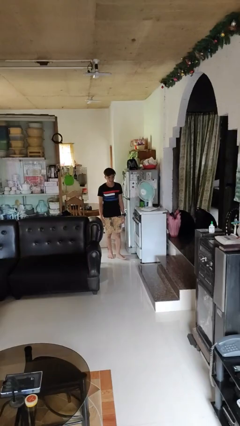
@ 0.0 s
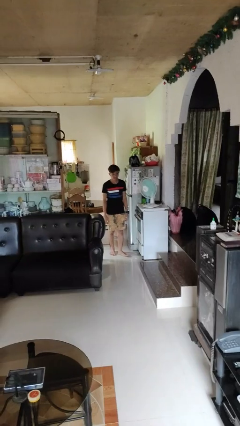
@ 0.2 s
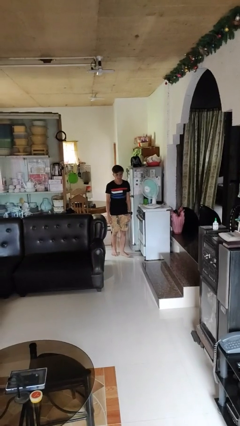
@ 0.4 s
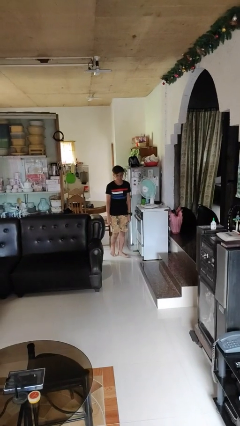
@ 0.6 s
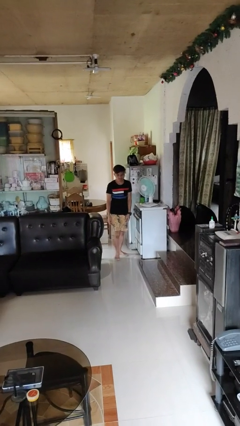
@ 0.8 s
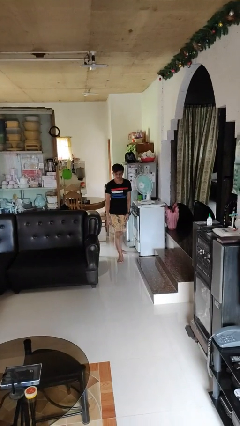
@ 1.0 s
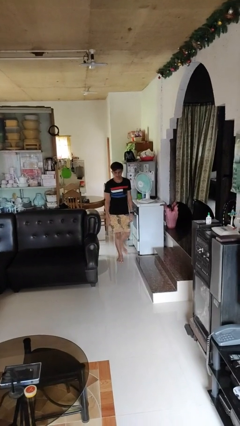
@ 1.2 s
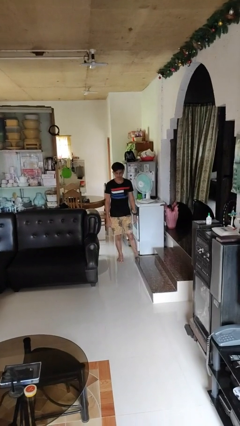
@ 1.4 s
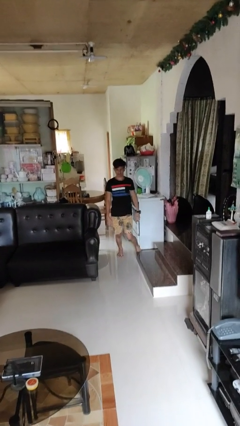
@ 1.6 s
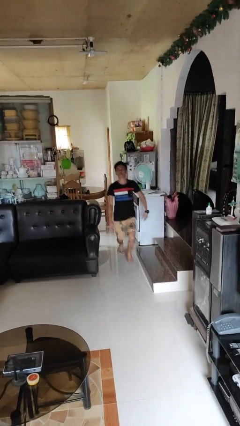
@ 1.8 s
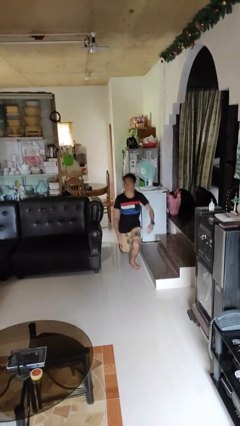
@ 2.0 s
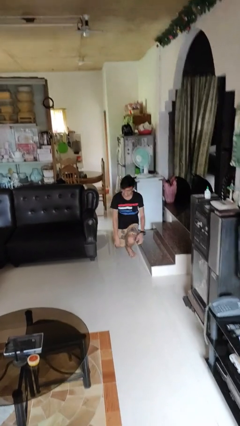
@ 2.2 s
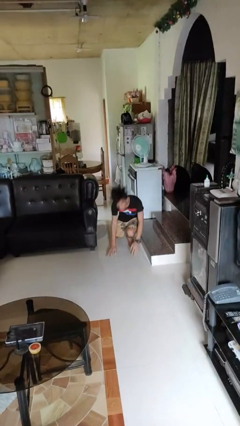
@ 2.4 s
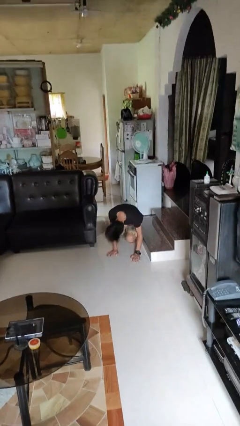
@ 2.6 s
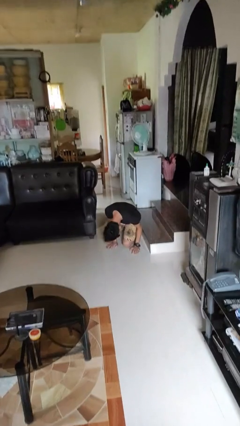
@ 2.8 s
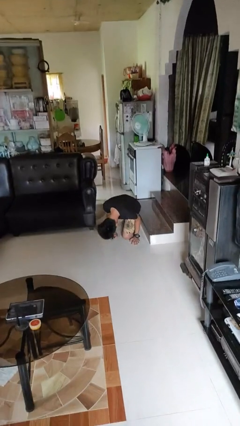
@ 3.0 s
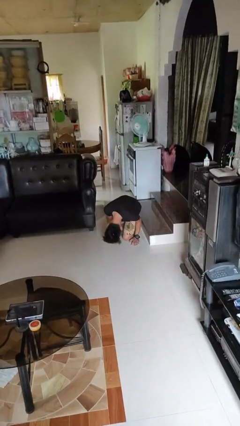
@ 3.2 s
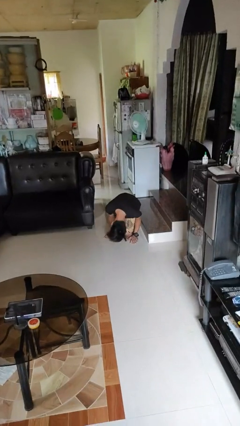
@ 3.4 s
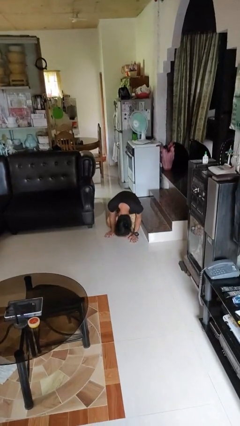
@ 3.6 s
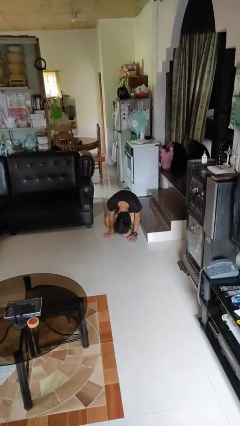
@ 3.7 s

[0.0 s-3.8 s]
person trips on object on floor

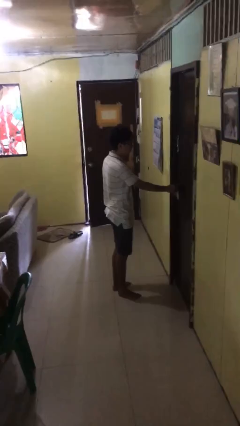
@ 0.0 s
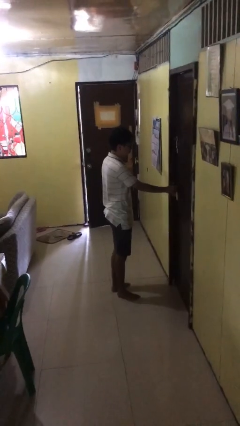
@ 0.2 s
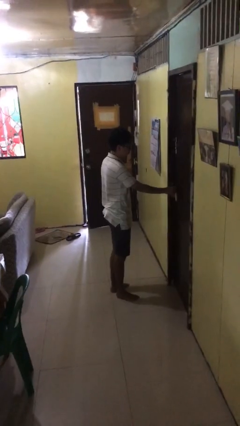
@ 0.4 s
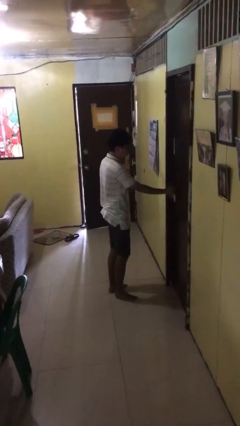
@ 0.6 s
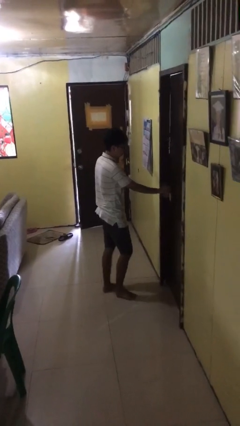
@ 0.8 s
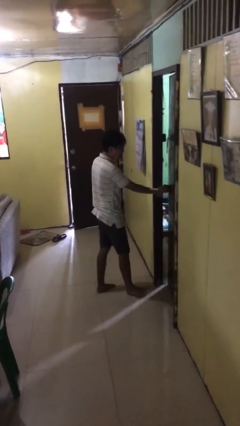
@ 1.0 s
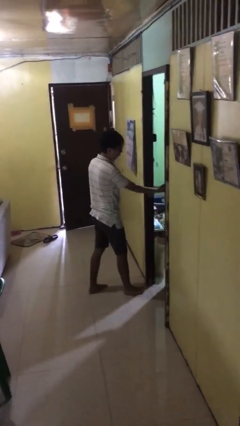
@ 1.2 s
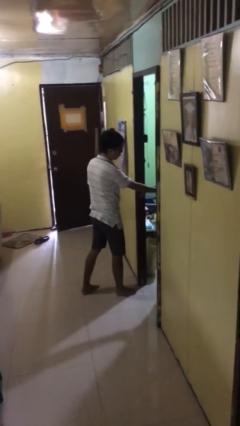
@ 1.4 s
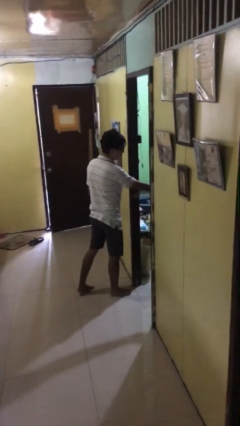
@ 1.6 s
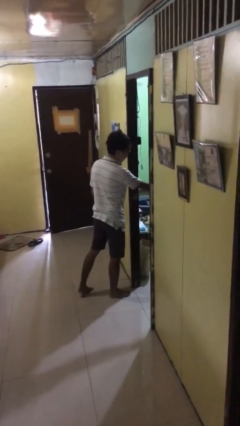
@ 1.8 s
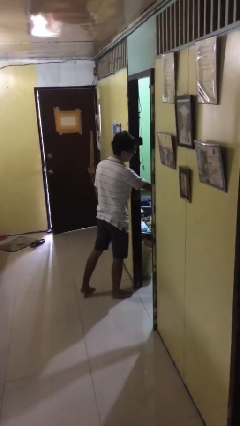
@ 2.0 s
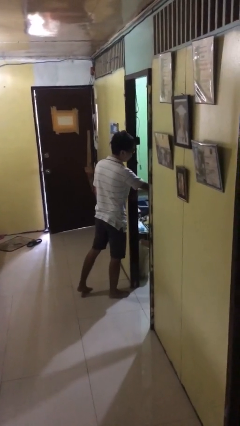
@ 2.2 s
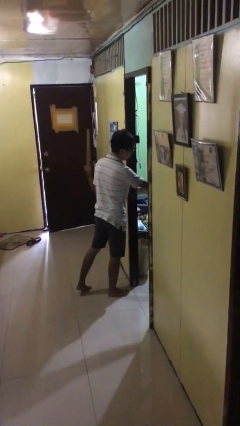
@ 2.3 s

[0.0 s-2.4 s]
person opens facility door

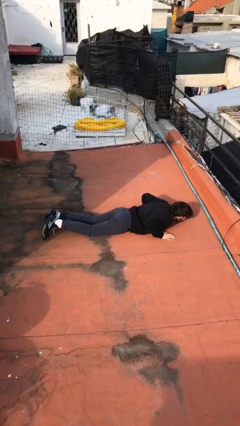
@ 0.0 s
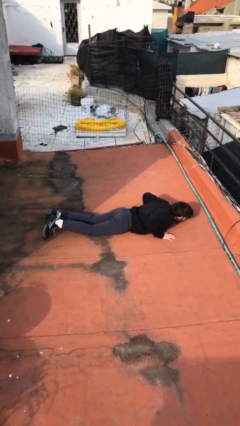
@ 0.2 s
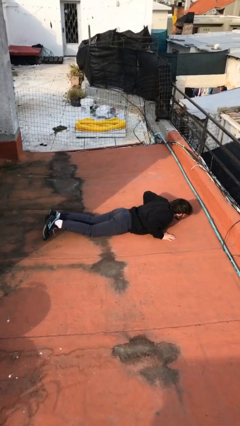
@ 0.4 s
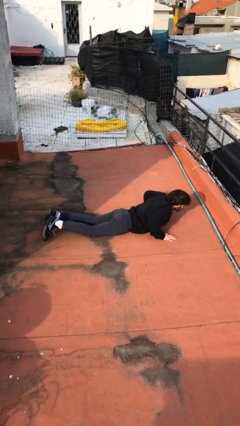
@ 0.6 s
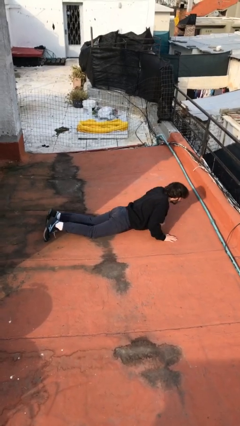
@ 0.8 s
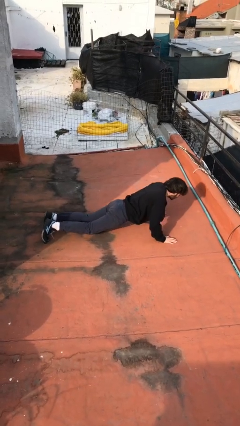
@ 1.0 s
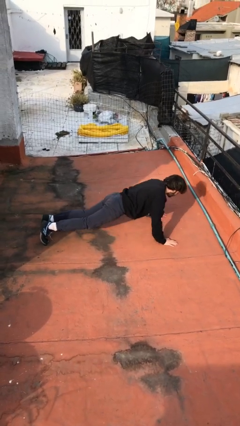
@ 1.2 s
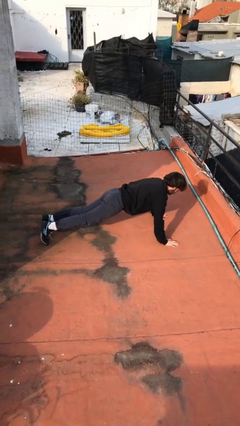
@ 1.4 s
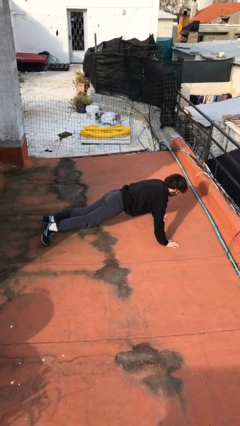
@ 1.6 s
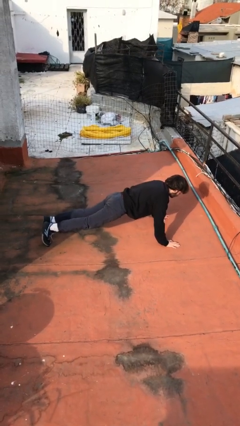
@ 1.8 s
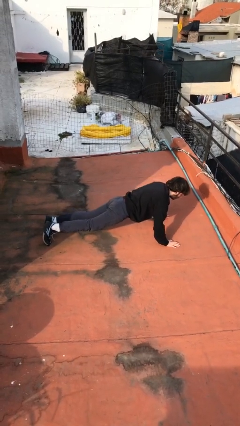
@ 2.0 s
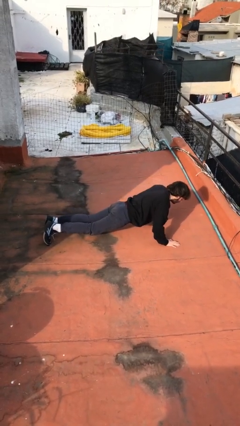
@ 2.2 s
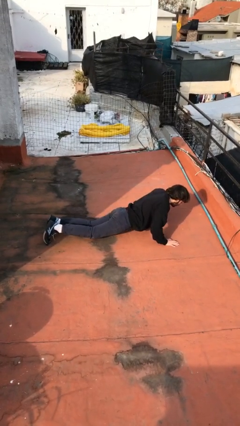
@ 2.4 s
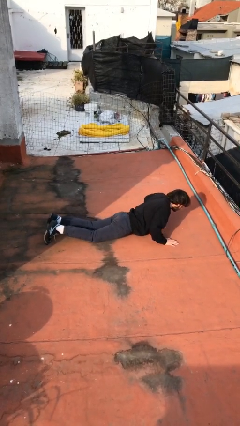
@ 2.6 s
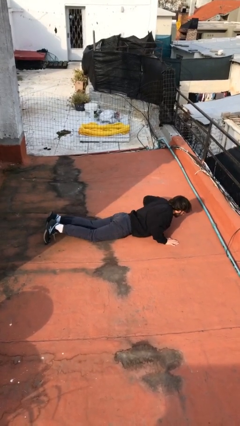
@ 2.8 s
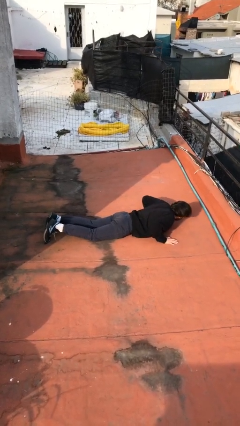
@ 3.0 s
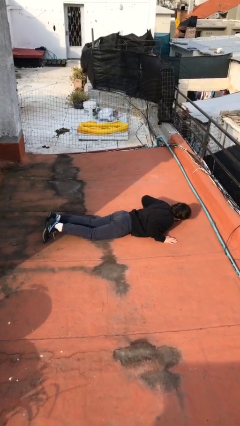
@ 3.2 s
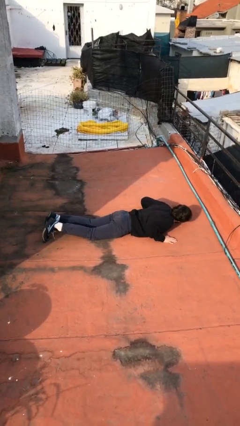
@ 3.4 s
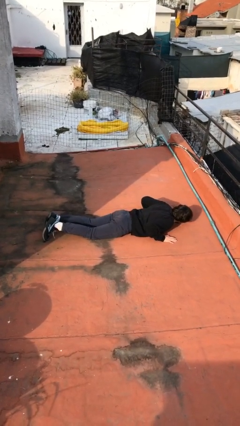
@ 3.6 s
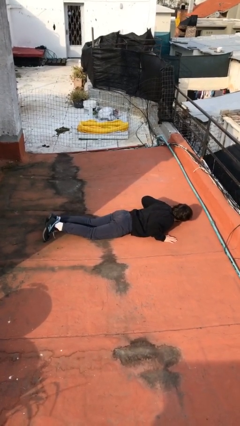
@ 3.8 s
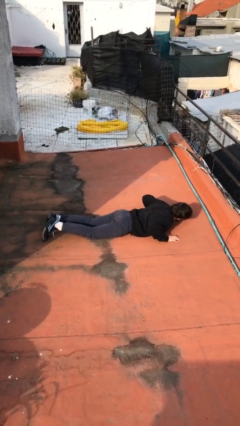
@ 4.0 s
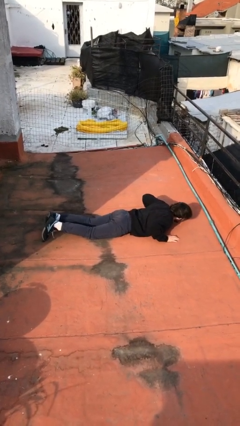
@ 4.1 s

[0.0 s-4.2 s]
person exercises with pushup

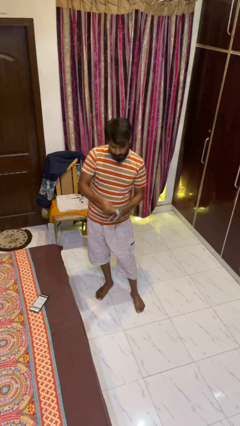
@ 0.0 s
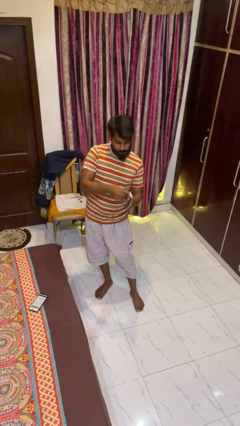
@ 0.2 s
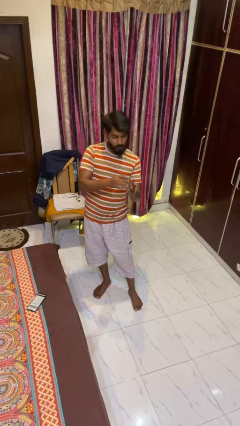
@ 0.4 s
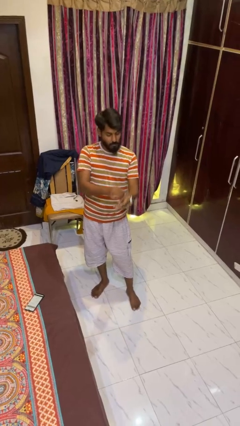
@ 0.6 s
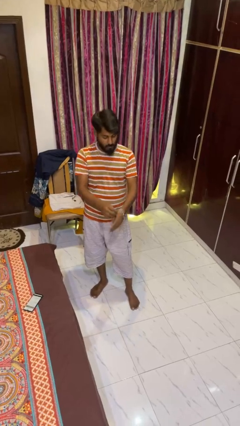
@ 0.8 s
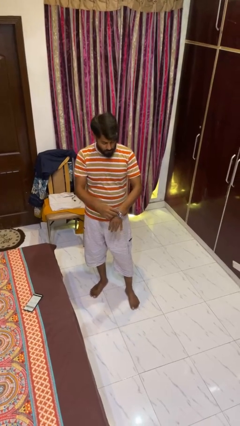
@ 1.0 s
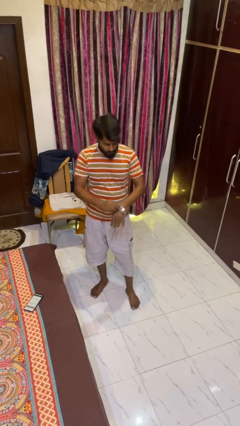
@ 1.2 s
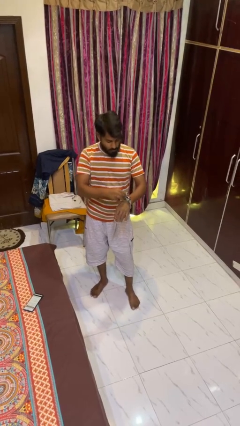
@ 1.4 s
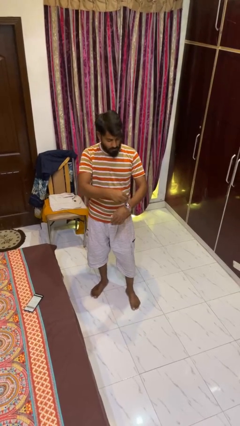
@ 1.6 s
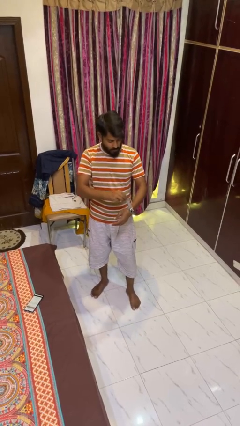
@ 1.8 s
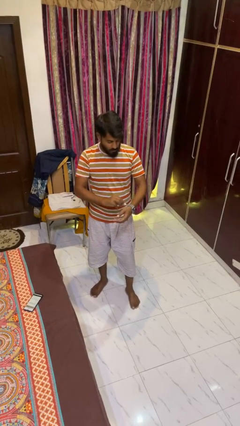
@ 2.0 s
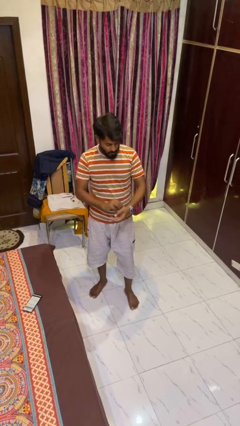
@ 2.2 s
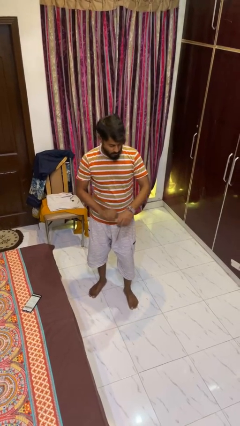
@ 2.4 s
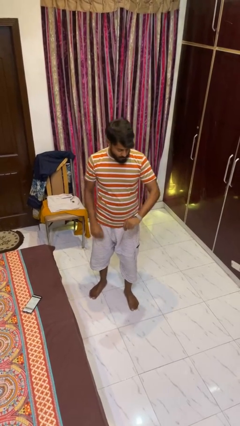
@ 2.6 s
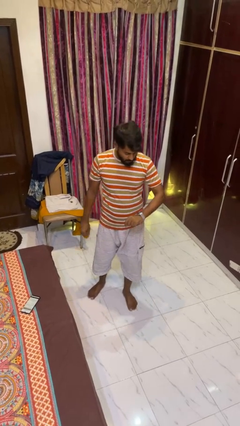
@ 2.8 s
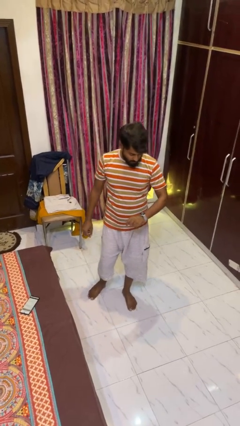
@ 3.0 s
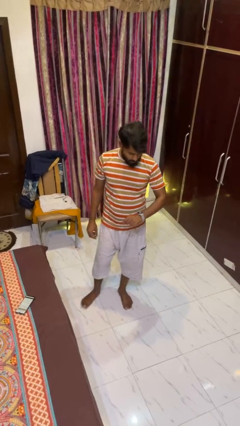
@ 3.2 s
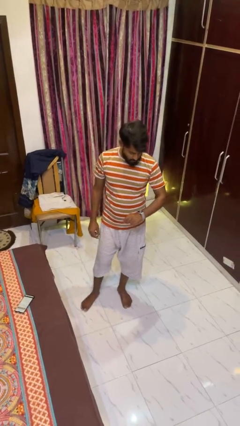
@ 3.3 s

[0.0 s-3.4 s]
person puts on wristwatch

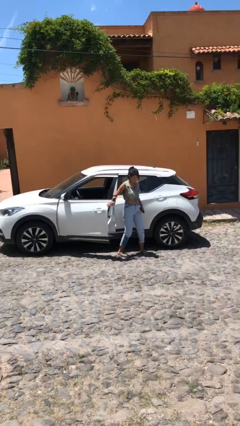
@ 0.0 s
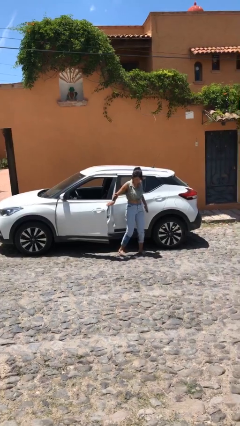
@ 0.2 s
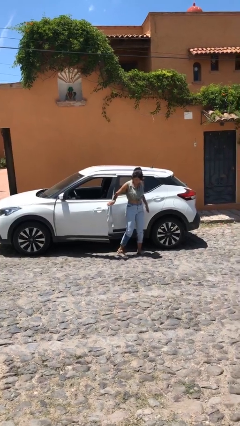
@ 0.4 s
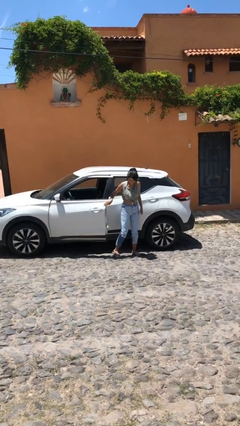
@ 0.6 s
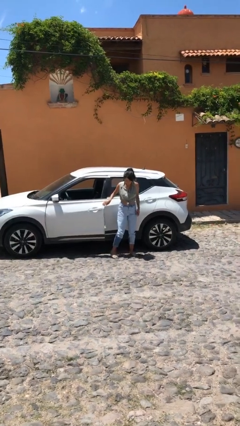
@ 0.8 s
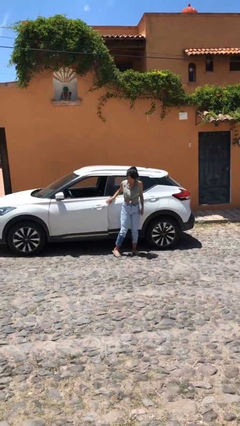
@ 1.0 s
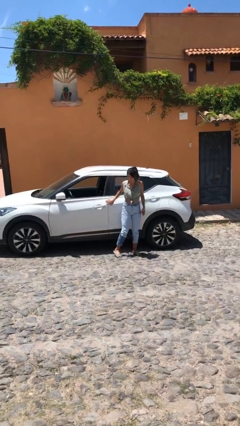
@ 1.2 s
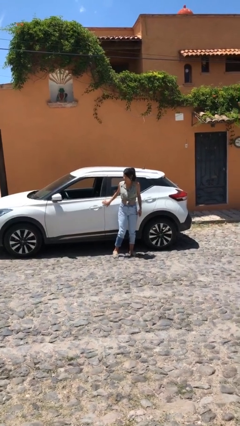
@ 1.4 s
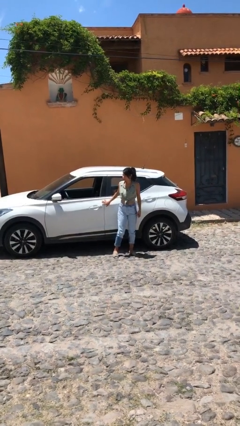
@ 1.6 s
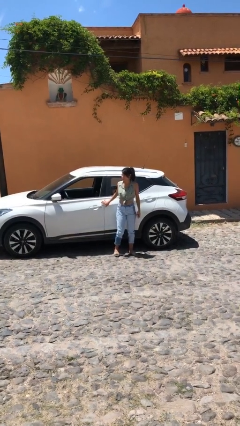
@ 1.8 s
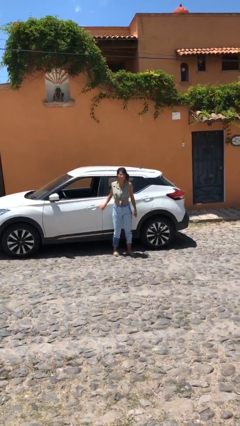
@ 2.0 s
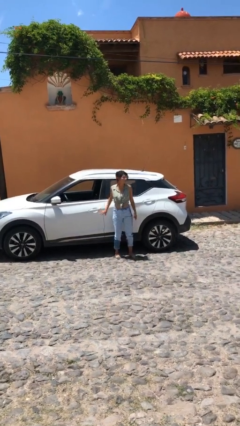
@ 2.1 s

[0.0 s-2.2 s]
person closes car door

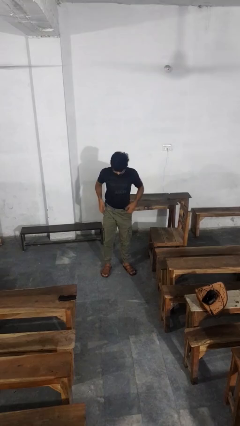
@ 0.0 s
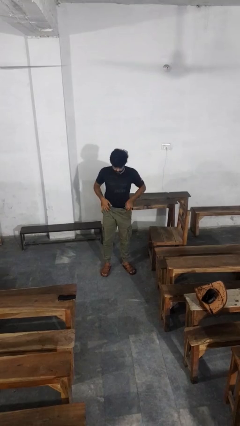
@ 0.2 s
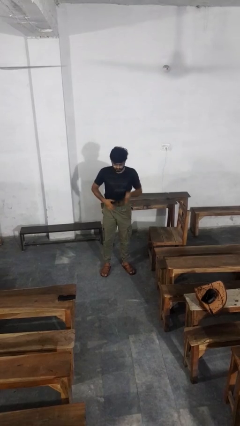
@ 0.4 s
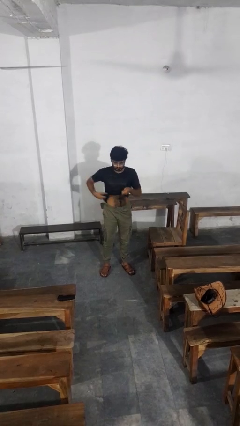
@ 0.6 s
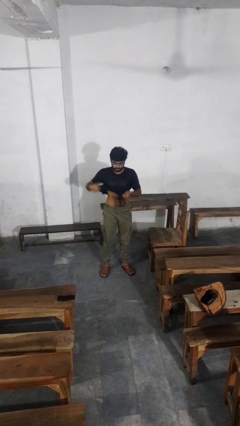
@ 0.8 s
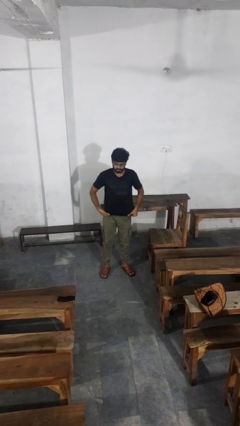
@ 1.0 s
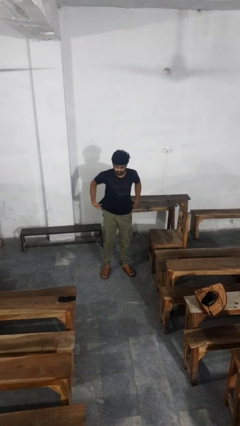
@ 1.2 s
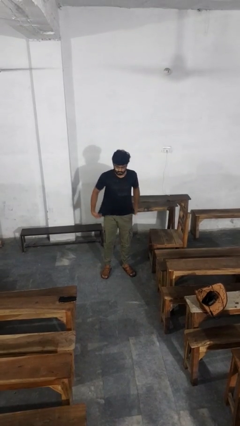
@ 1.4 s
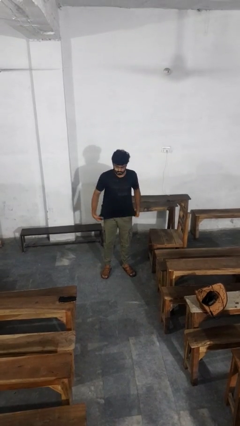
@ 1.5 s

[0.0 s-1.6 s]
person untucks shirt
